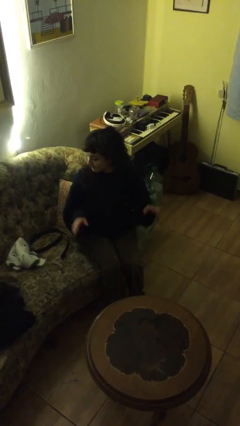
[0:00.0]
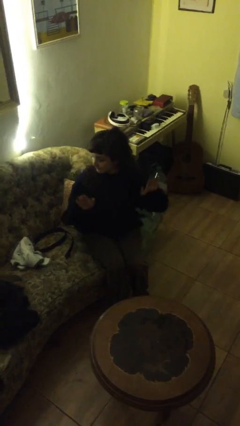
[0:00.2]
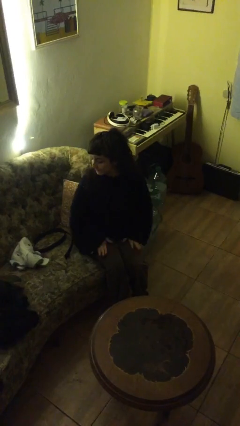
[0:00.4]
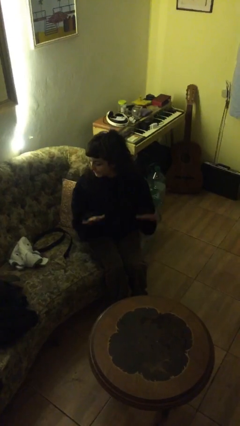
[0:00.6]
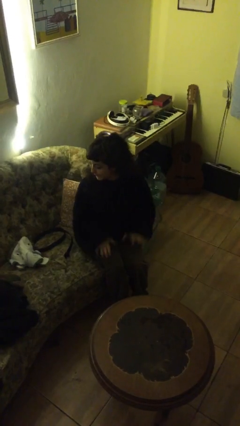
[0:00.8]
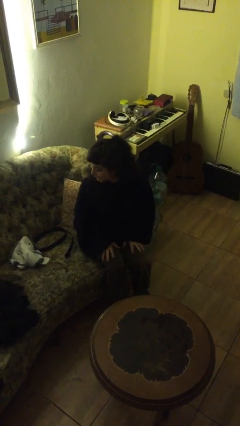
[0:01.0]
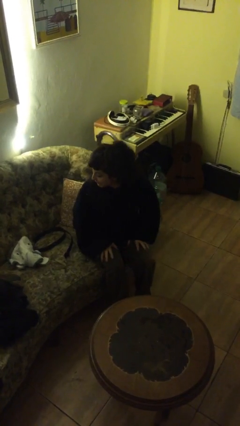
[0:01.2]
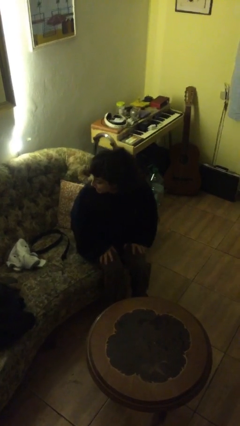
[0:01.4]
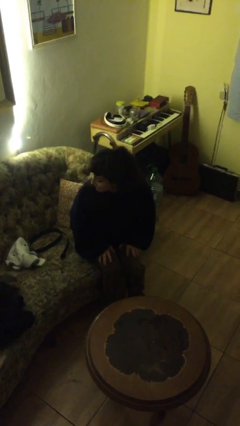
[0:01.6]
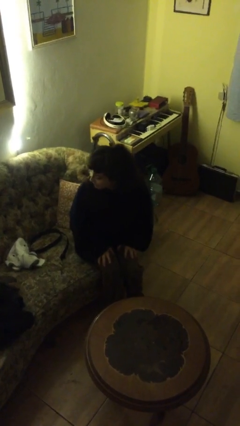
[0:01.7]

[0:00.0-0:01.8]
person slaps hands on thighs

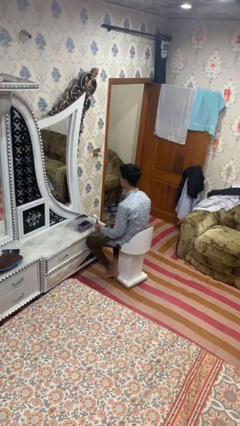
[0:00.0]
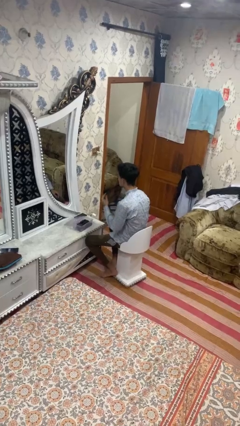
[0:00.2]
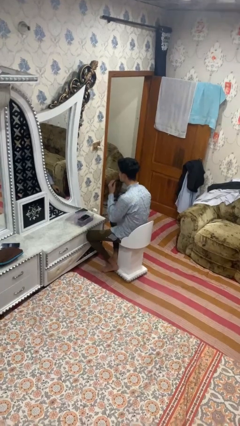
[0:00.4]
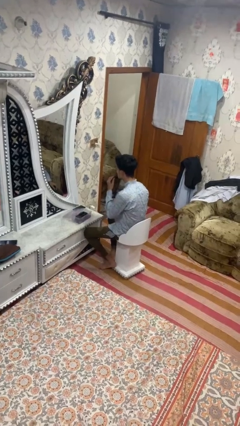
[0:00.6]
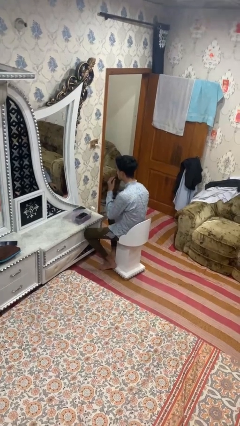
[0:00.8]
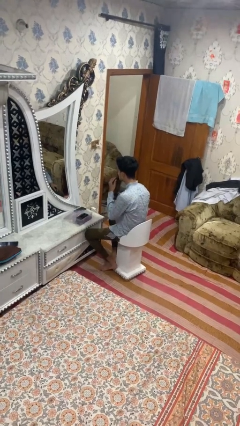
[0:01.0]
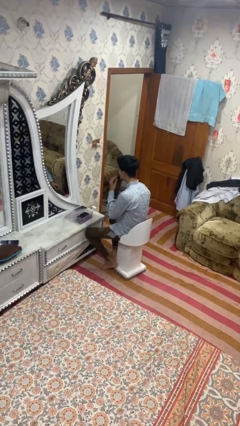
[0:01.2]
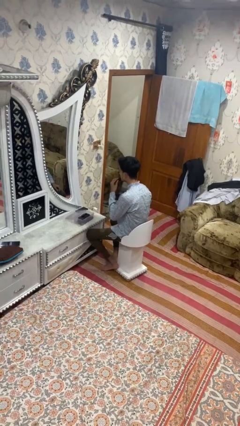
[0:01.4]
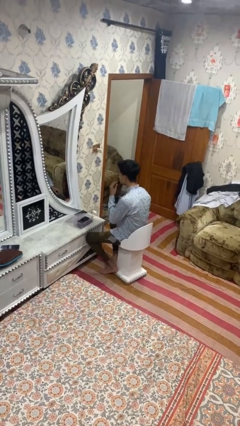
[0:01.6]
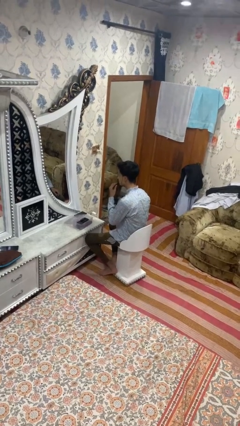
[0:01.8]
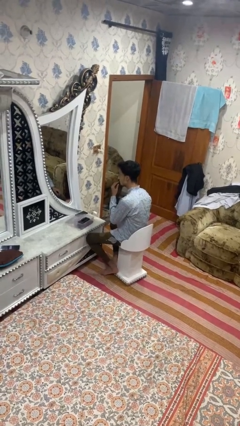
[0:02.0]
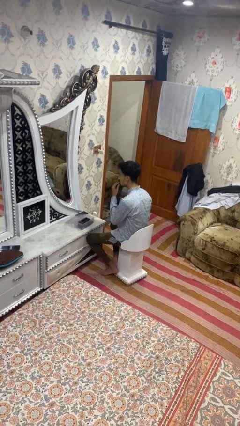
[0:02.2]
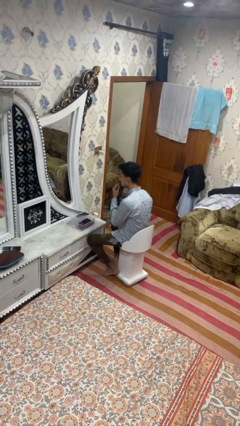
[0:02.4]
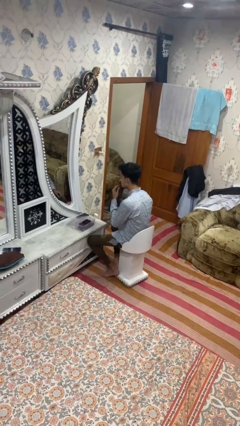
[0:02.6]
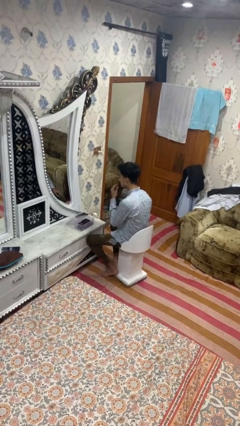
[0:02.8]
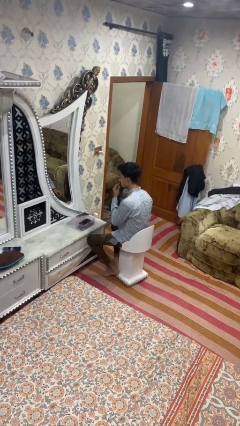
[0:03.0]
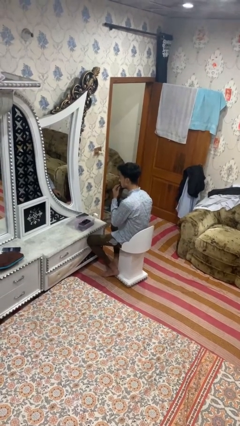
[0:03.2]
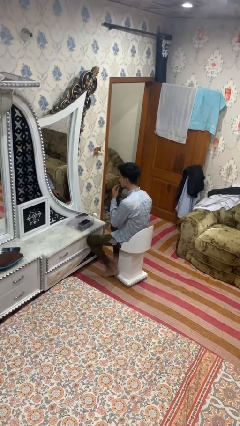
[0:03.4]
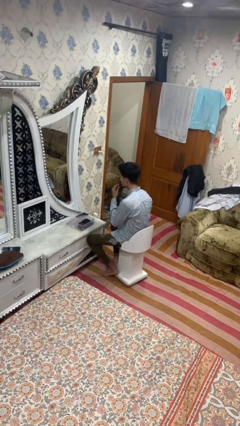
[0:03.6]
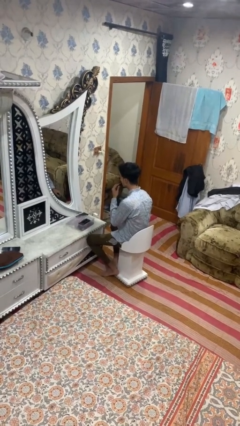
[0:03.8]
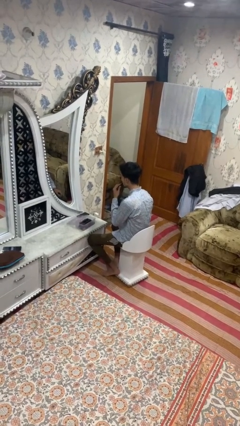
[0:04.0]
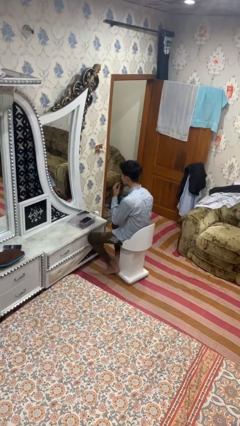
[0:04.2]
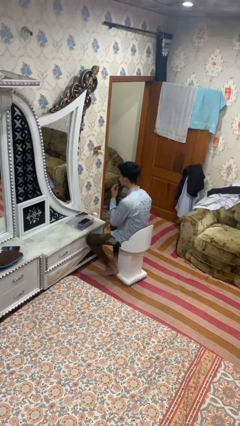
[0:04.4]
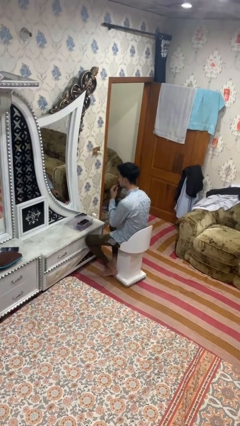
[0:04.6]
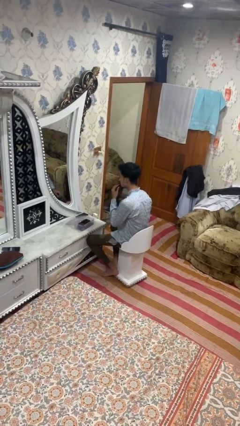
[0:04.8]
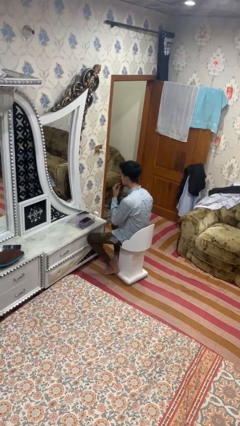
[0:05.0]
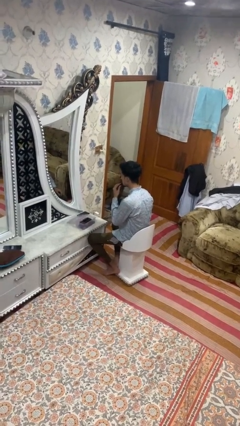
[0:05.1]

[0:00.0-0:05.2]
person applies lip makeup

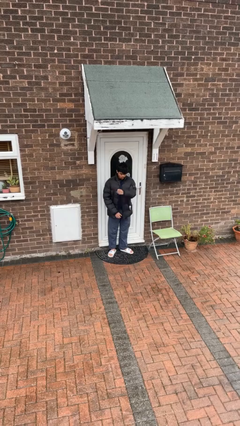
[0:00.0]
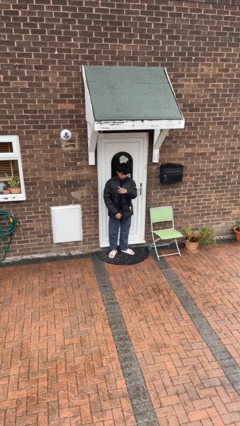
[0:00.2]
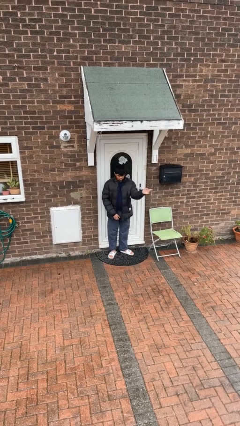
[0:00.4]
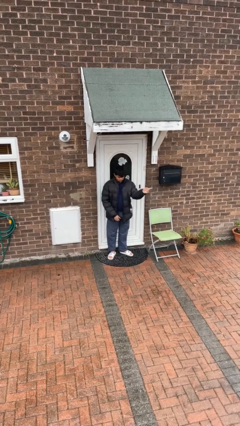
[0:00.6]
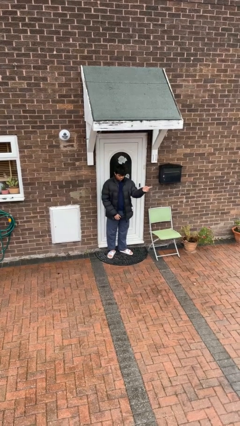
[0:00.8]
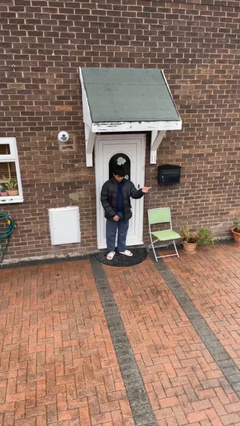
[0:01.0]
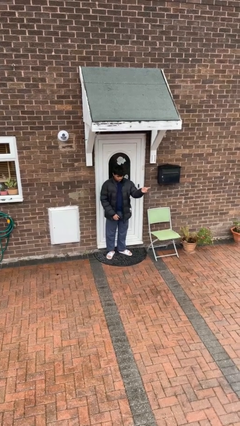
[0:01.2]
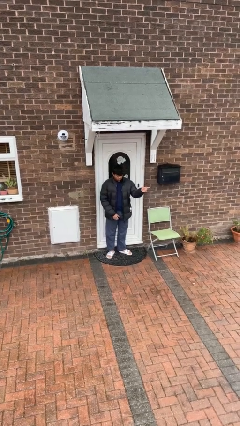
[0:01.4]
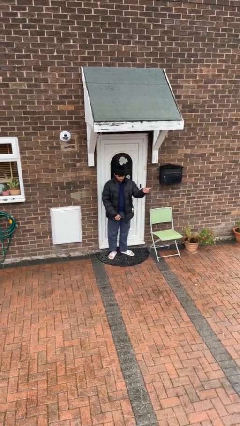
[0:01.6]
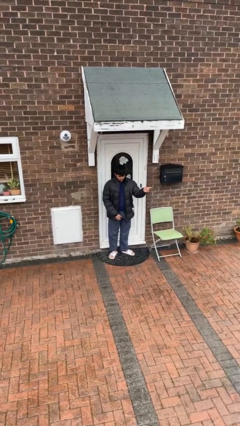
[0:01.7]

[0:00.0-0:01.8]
person gestures swipe left

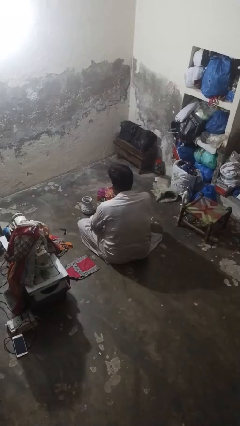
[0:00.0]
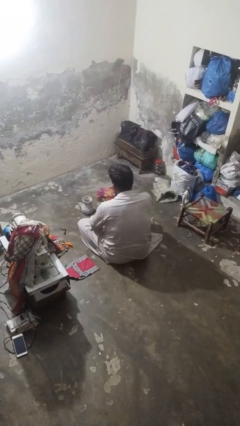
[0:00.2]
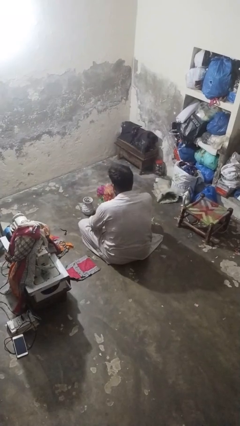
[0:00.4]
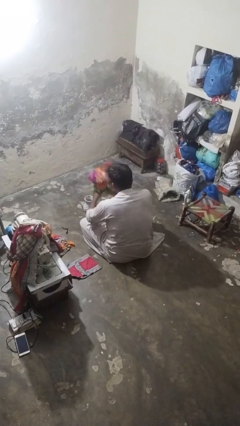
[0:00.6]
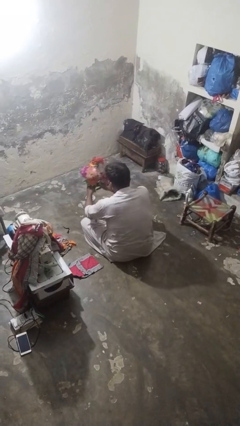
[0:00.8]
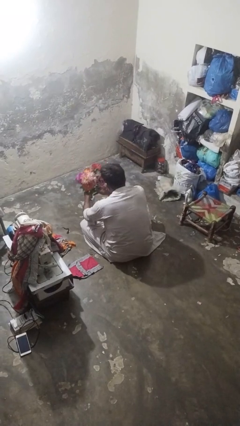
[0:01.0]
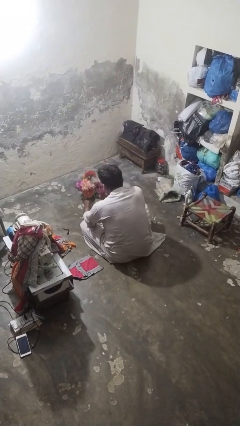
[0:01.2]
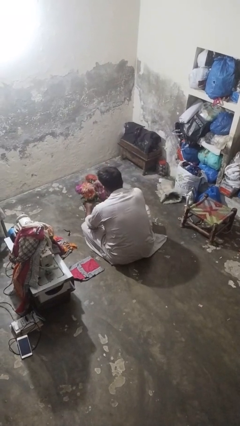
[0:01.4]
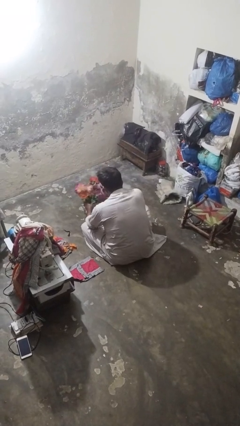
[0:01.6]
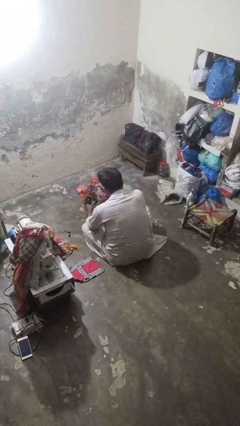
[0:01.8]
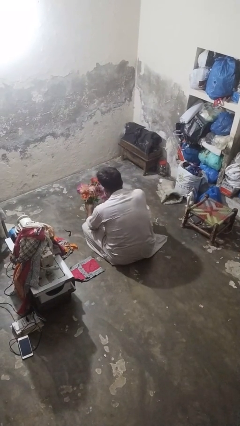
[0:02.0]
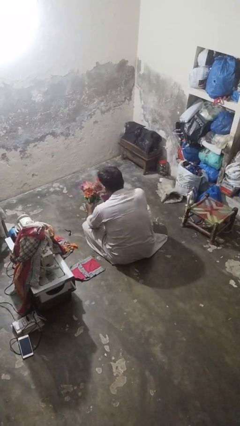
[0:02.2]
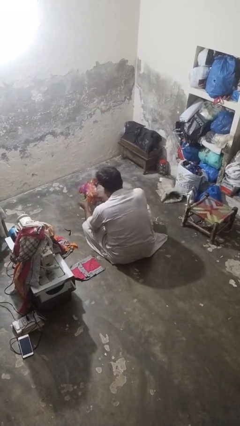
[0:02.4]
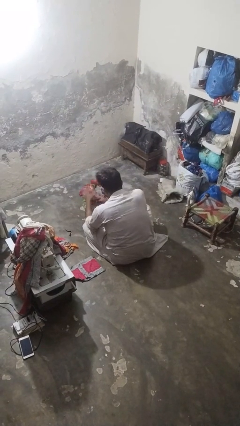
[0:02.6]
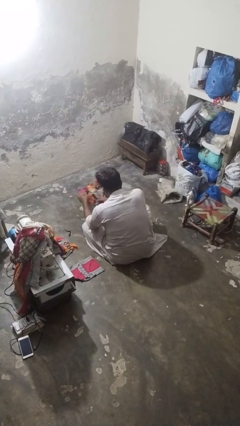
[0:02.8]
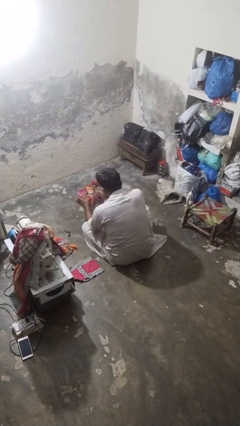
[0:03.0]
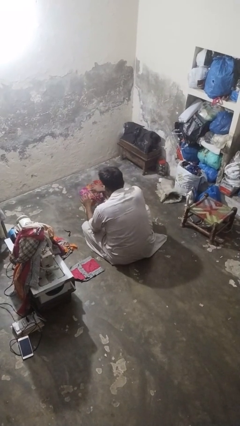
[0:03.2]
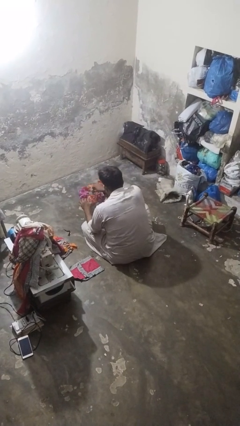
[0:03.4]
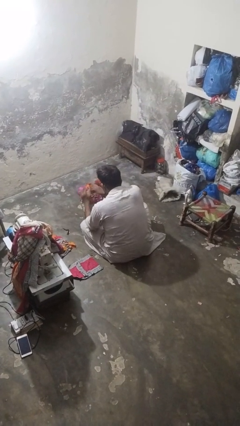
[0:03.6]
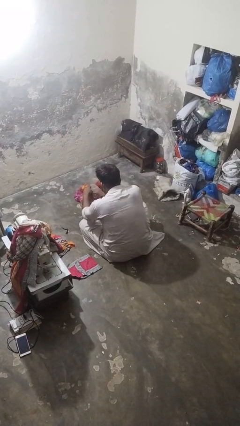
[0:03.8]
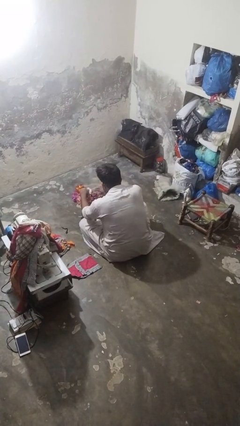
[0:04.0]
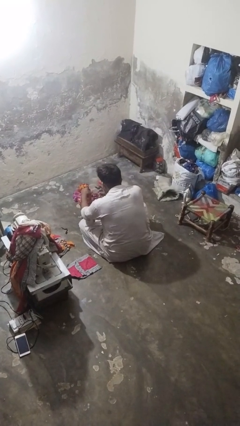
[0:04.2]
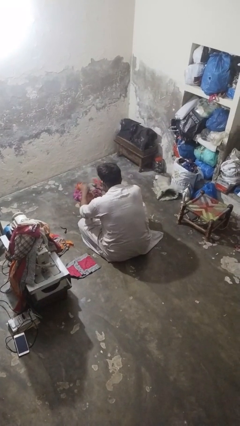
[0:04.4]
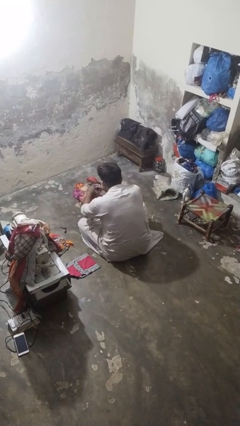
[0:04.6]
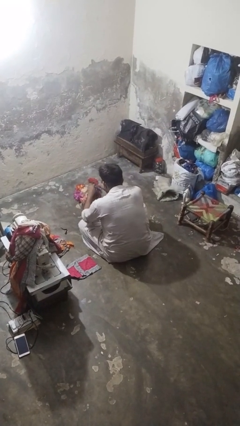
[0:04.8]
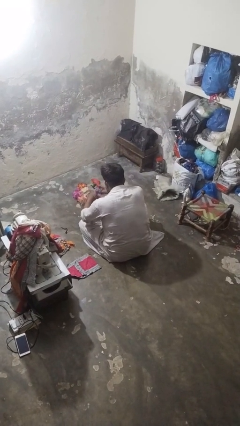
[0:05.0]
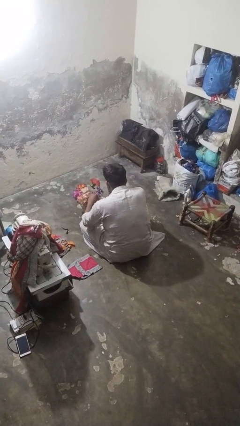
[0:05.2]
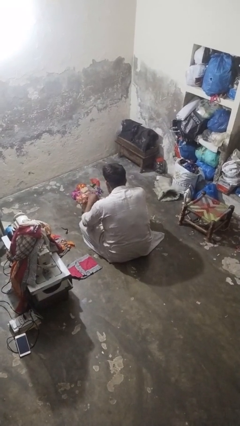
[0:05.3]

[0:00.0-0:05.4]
person arranges flowers in vase

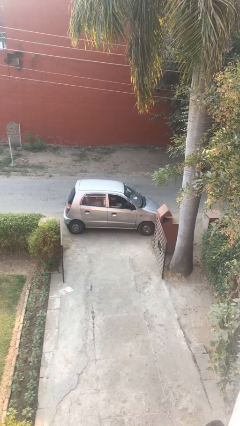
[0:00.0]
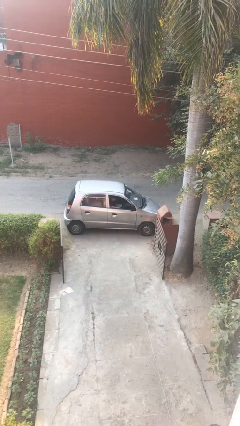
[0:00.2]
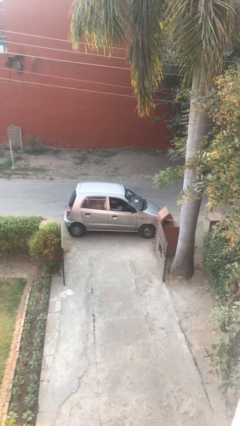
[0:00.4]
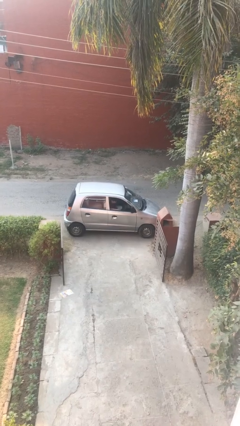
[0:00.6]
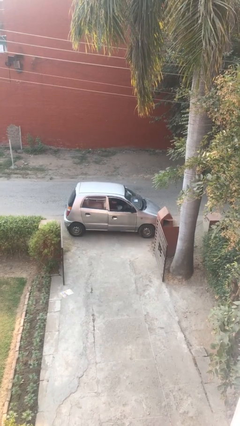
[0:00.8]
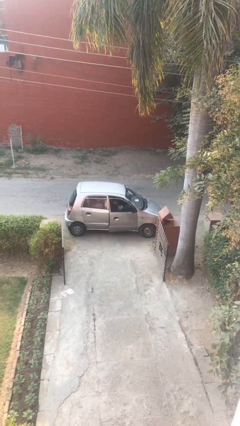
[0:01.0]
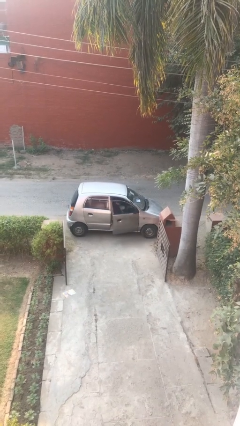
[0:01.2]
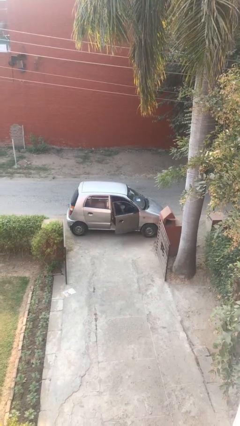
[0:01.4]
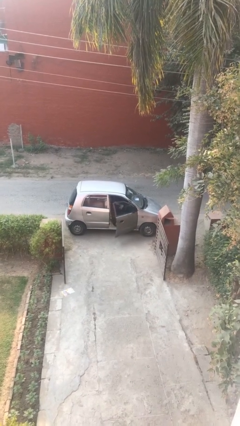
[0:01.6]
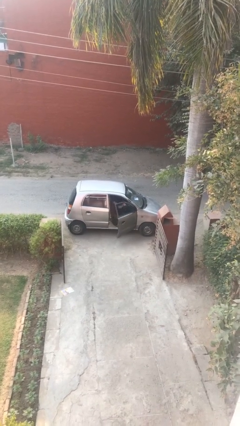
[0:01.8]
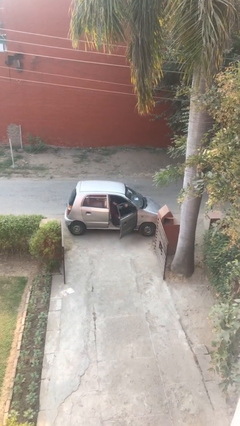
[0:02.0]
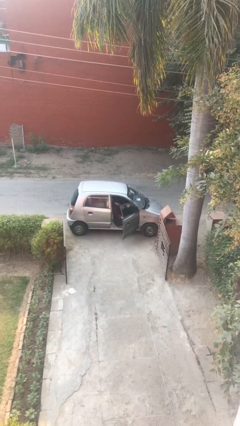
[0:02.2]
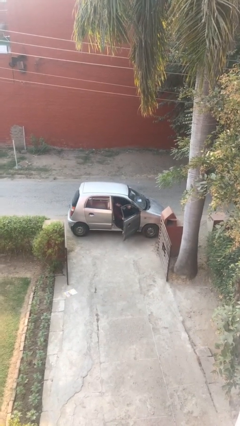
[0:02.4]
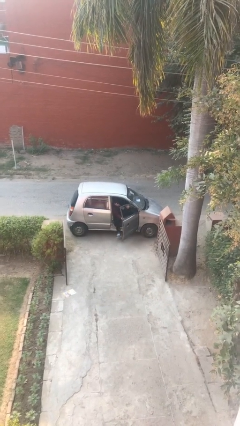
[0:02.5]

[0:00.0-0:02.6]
person opens car door

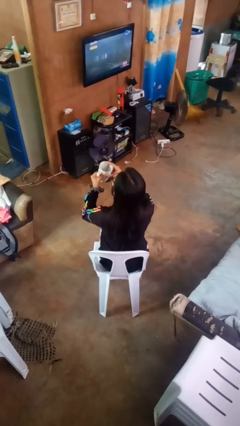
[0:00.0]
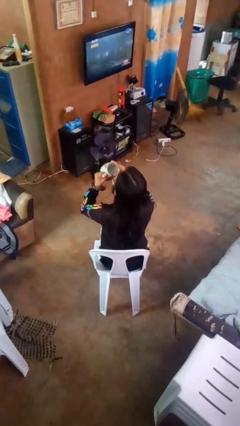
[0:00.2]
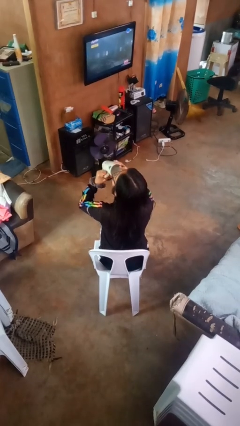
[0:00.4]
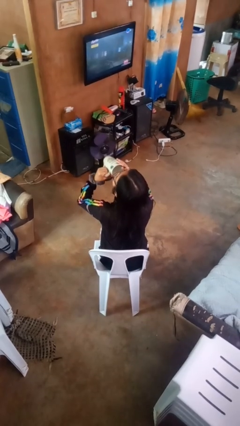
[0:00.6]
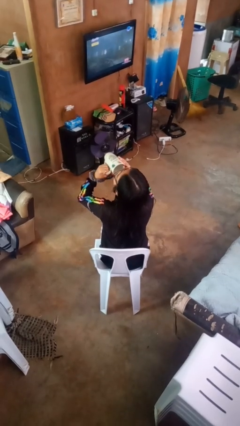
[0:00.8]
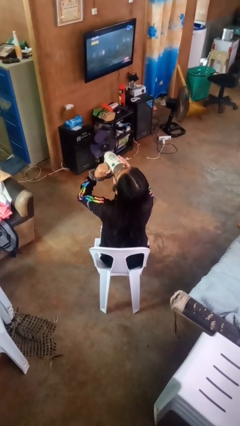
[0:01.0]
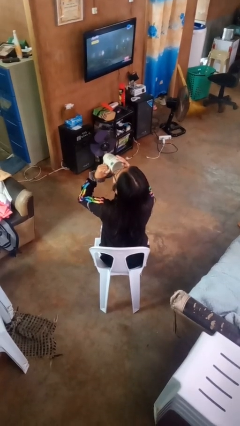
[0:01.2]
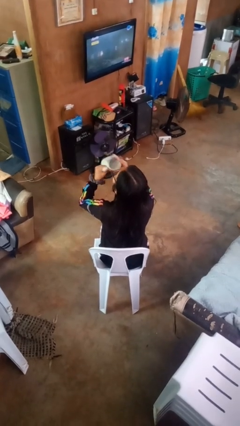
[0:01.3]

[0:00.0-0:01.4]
person drinks from mug
